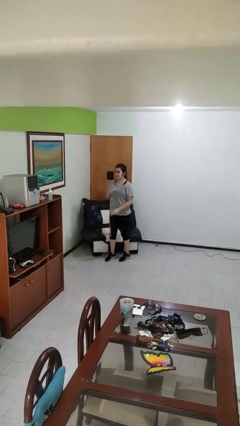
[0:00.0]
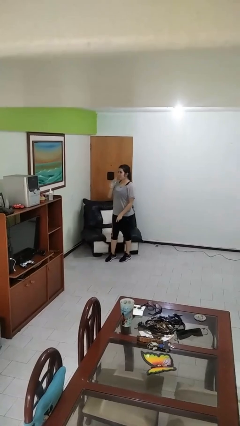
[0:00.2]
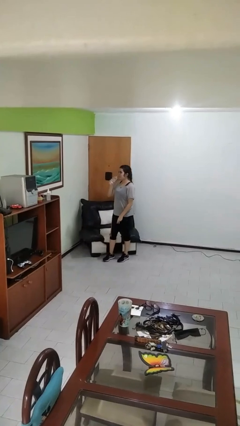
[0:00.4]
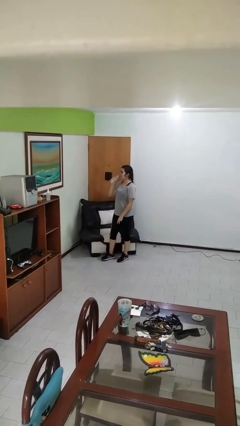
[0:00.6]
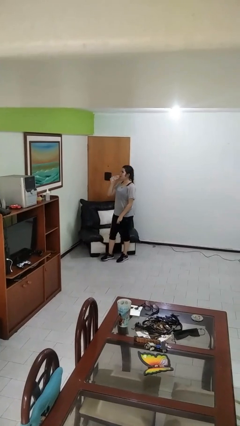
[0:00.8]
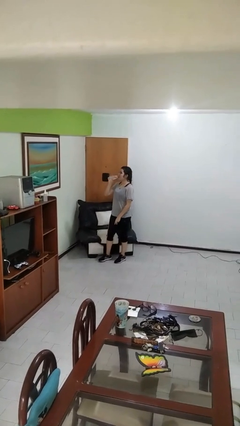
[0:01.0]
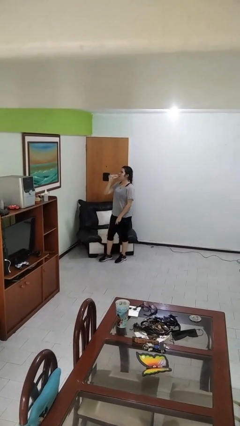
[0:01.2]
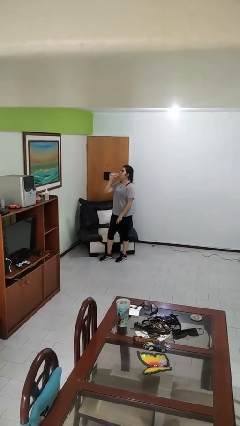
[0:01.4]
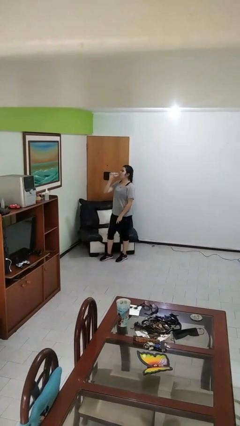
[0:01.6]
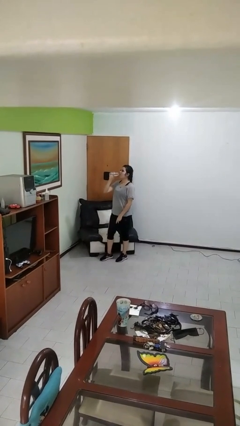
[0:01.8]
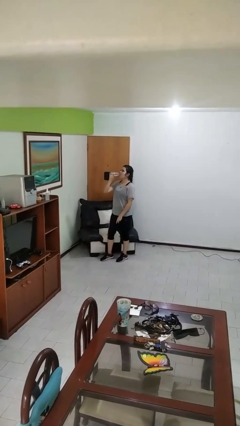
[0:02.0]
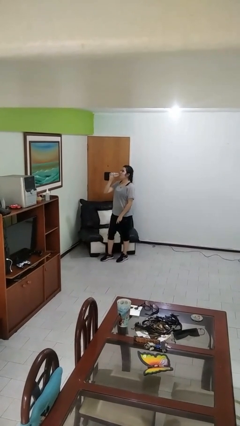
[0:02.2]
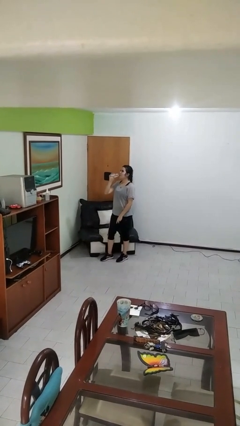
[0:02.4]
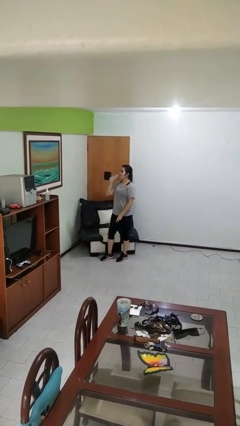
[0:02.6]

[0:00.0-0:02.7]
person drinks from bottle

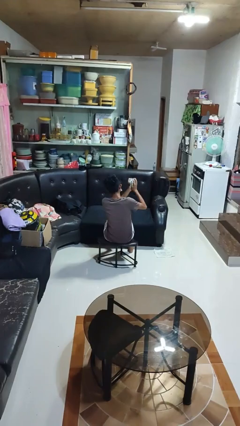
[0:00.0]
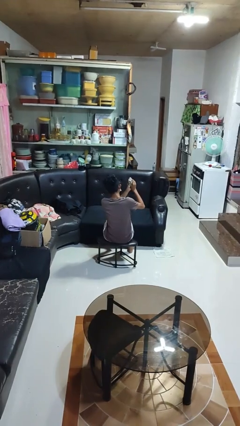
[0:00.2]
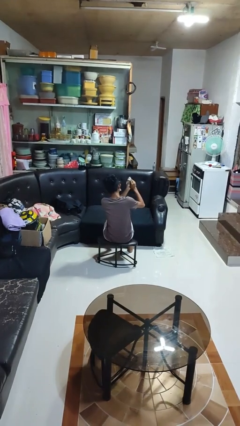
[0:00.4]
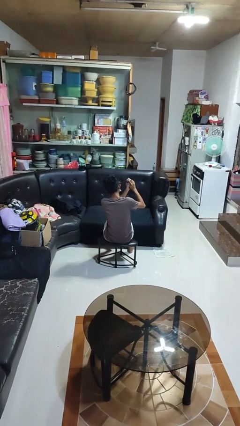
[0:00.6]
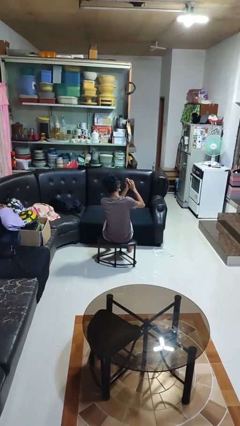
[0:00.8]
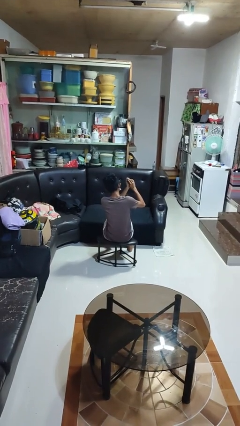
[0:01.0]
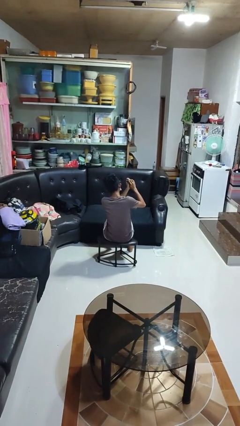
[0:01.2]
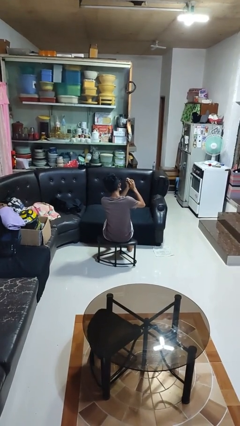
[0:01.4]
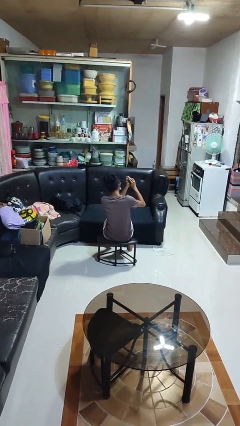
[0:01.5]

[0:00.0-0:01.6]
person crumples paper

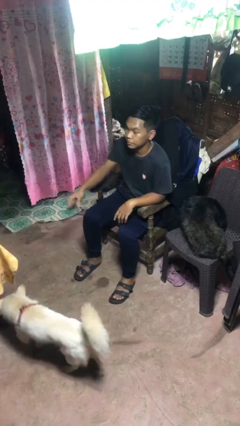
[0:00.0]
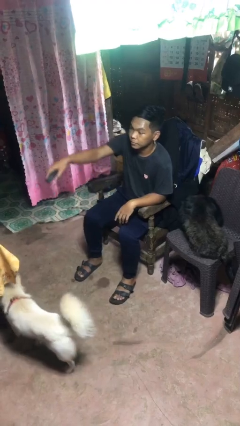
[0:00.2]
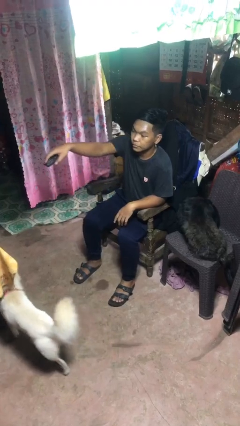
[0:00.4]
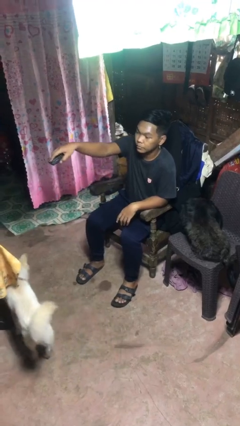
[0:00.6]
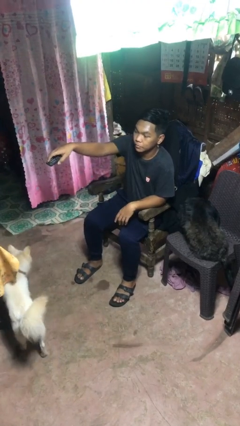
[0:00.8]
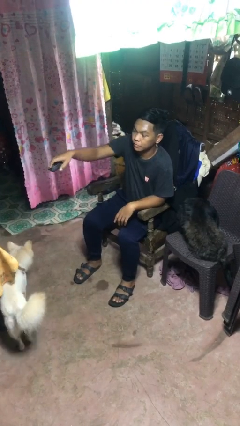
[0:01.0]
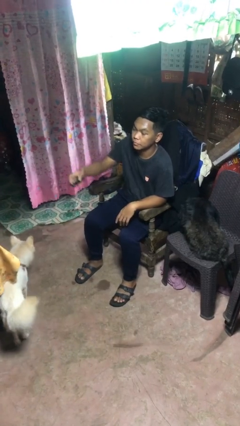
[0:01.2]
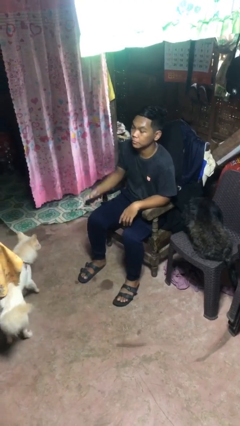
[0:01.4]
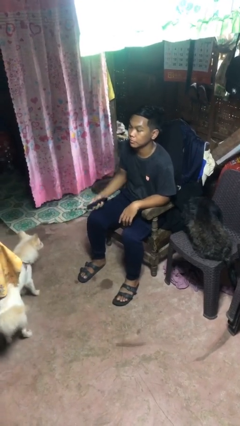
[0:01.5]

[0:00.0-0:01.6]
person uses television remote

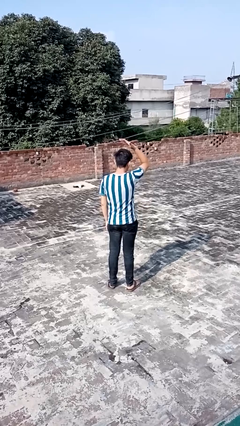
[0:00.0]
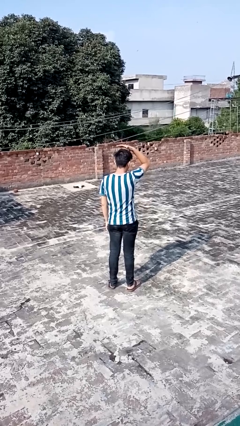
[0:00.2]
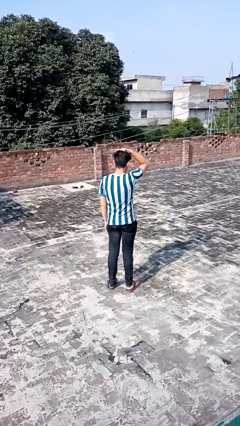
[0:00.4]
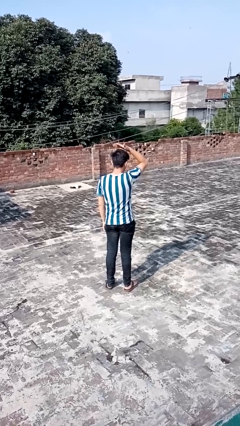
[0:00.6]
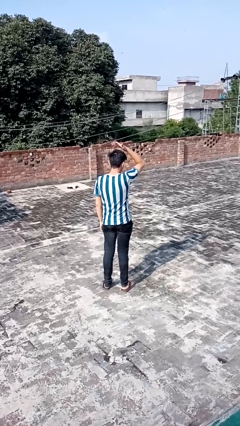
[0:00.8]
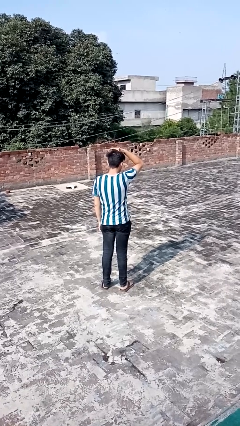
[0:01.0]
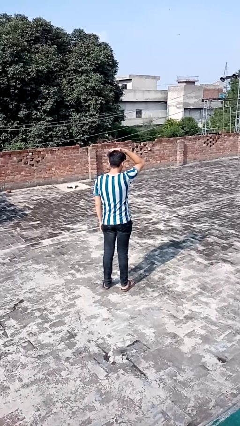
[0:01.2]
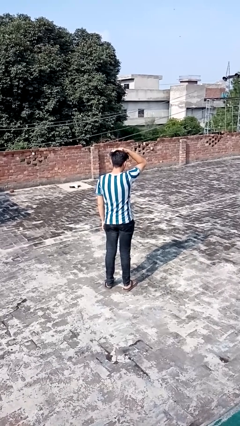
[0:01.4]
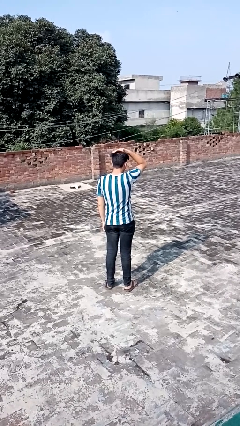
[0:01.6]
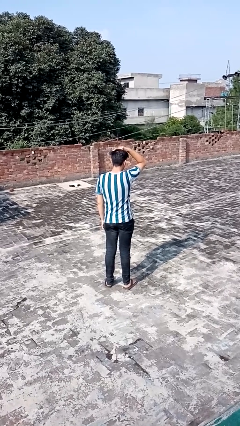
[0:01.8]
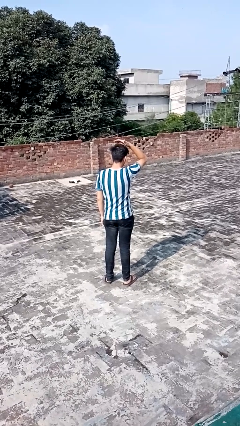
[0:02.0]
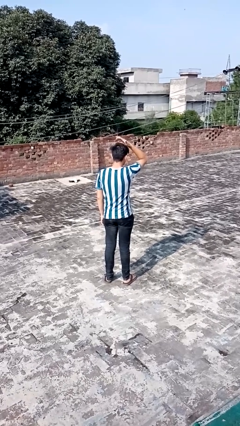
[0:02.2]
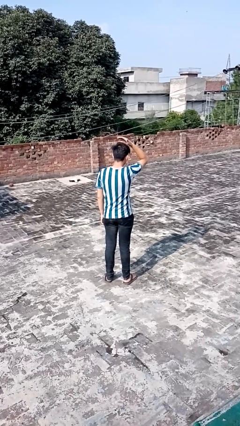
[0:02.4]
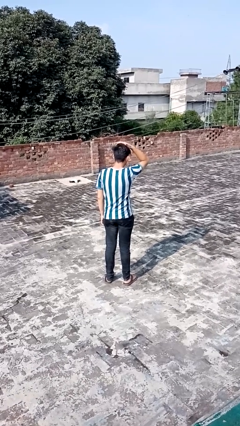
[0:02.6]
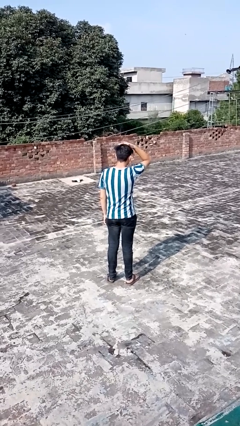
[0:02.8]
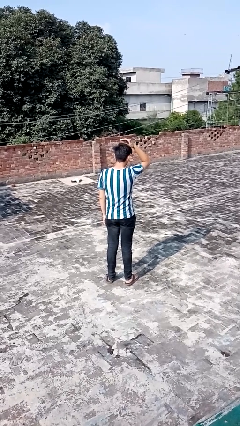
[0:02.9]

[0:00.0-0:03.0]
person pats head

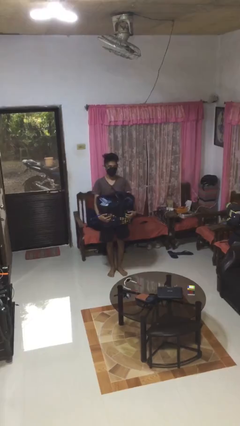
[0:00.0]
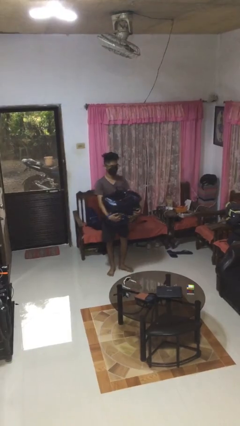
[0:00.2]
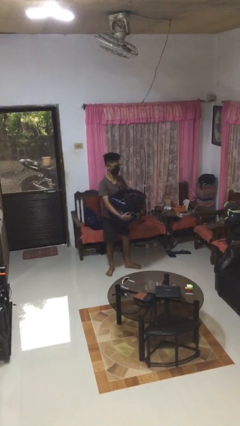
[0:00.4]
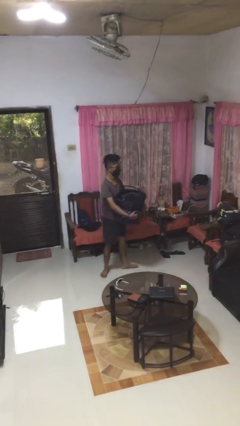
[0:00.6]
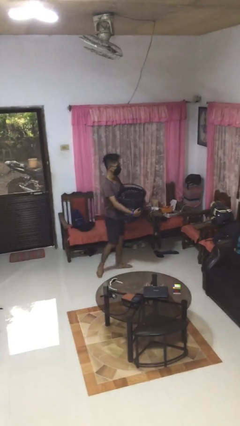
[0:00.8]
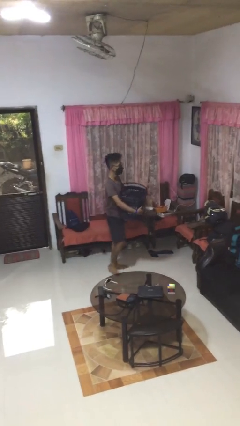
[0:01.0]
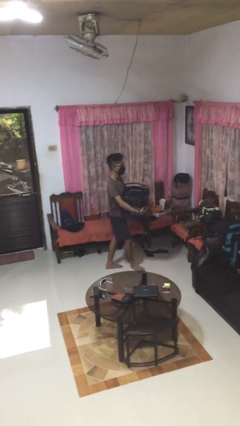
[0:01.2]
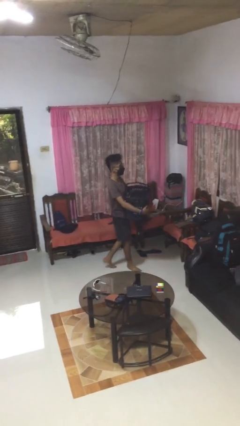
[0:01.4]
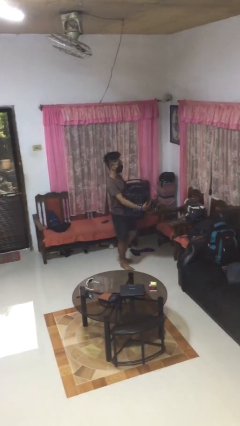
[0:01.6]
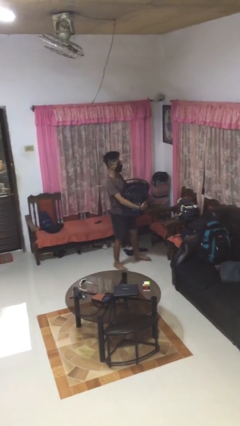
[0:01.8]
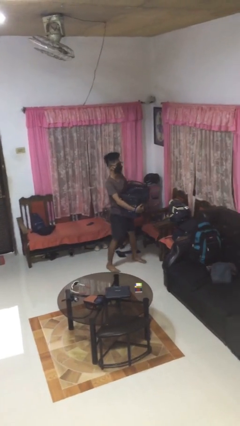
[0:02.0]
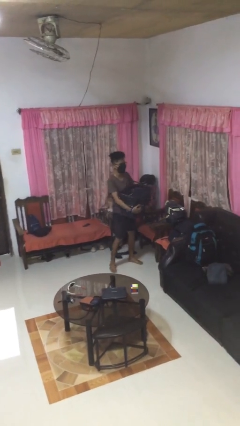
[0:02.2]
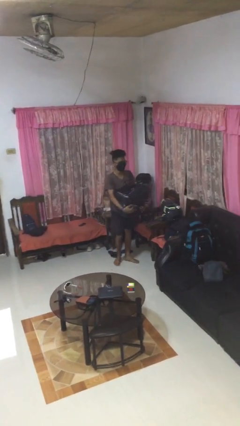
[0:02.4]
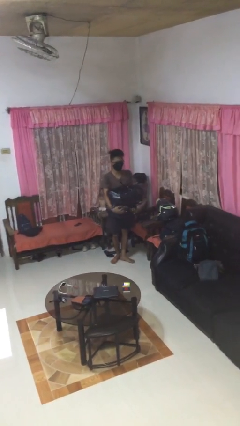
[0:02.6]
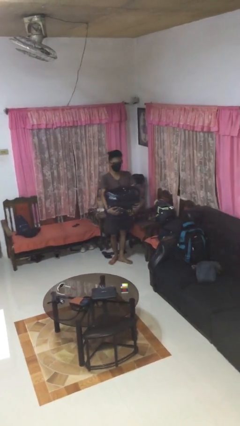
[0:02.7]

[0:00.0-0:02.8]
person carries laundry basket

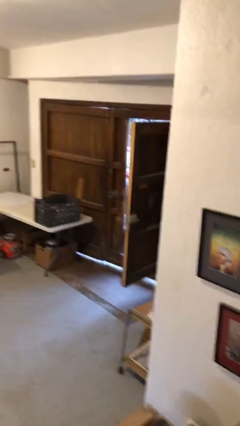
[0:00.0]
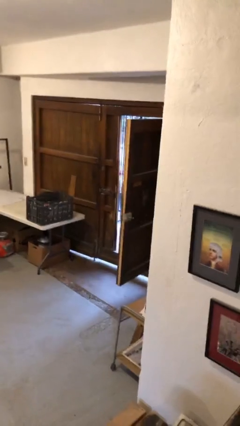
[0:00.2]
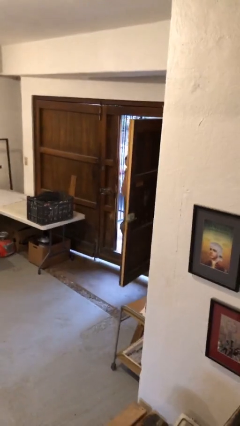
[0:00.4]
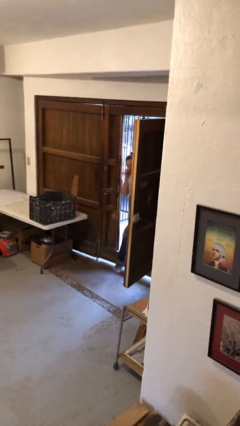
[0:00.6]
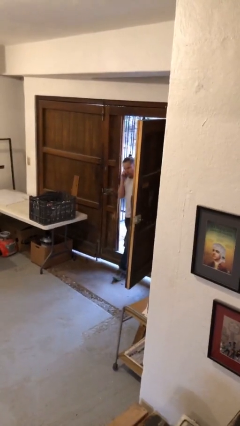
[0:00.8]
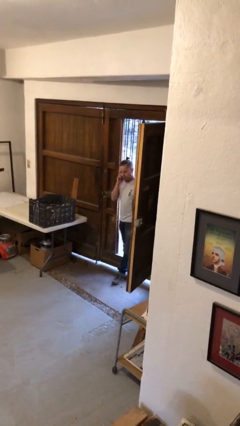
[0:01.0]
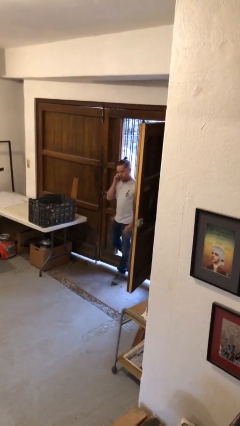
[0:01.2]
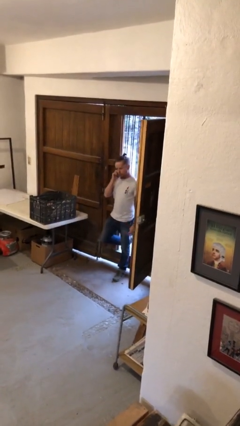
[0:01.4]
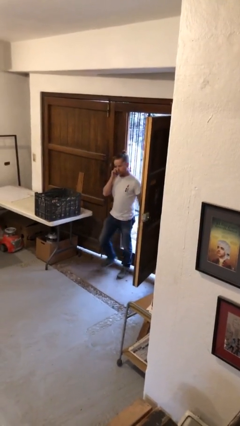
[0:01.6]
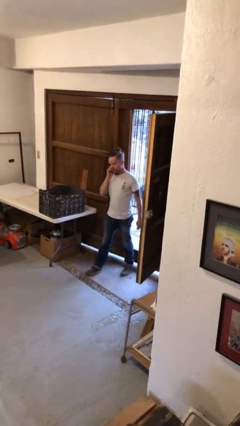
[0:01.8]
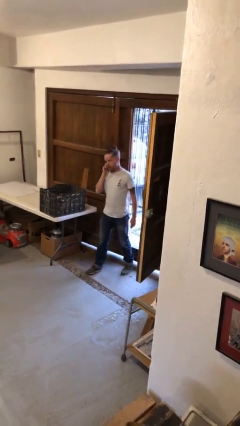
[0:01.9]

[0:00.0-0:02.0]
person enters scene through structure

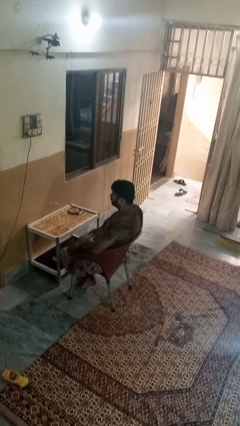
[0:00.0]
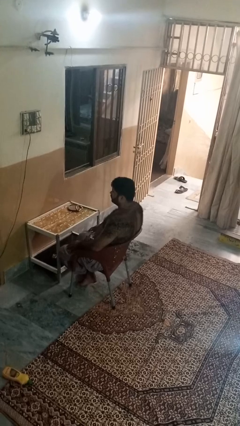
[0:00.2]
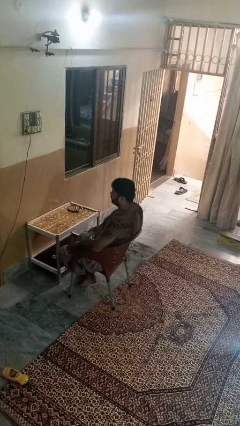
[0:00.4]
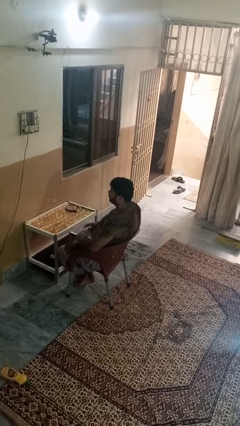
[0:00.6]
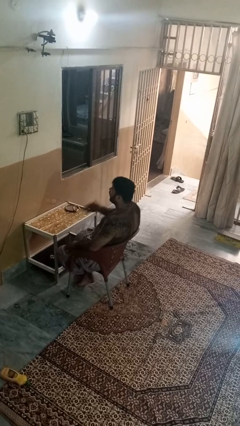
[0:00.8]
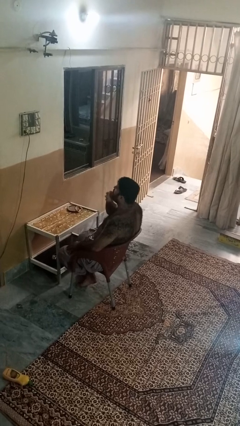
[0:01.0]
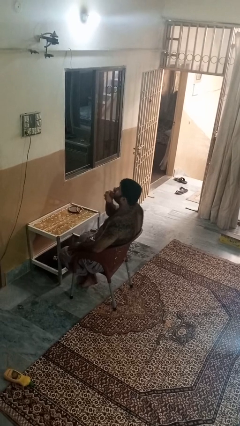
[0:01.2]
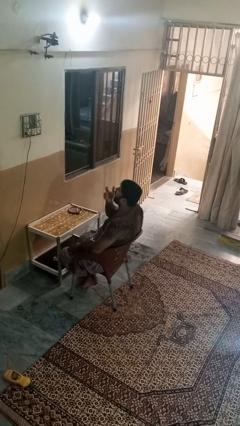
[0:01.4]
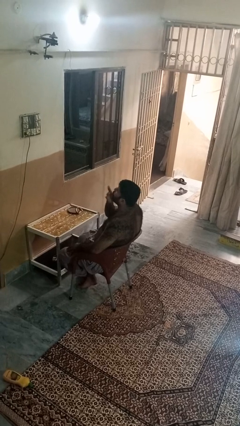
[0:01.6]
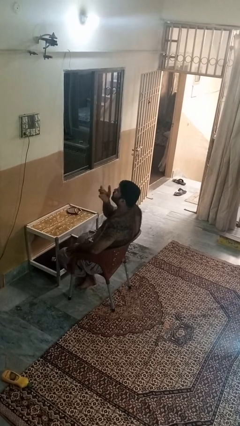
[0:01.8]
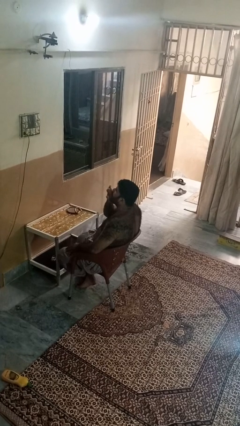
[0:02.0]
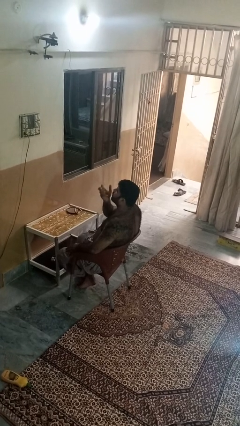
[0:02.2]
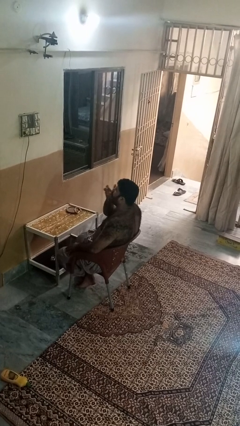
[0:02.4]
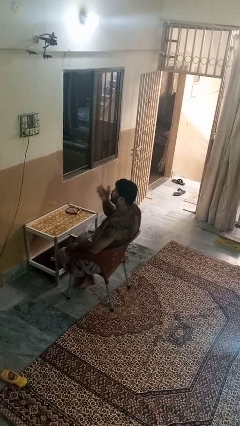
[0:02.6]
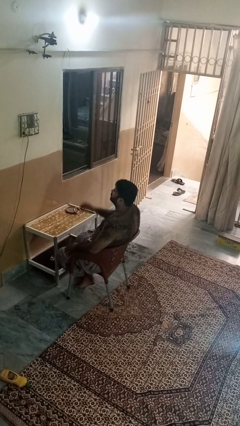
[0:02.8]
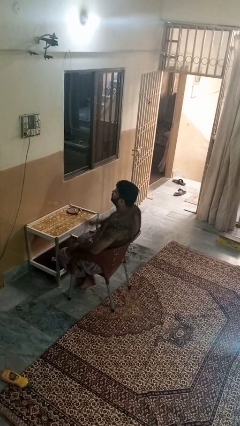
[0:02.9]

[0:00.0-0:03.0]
person licks fingers

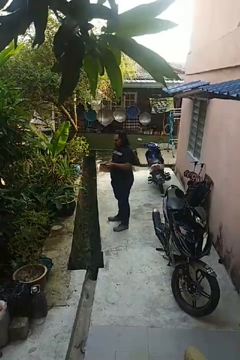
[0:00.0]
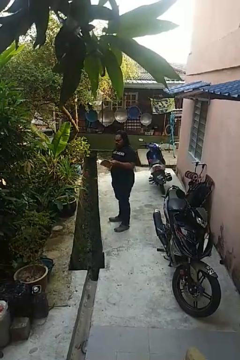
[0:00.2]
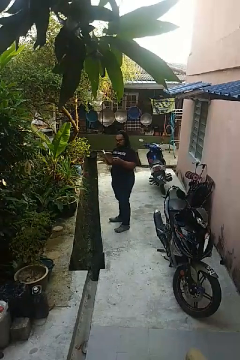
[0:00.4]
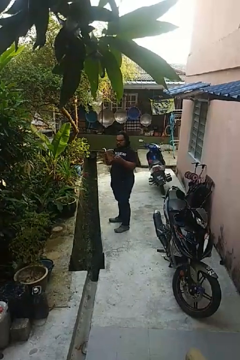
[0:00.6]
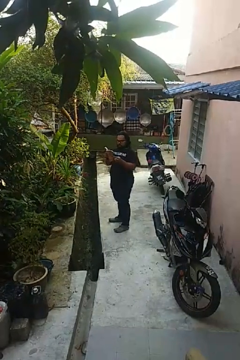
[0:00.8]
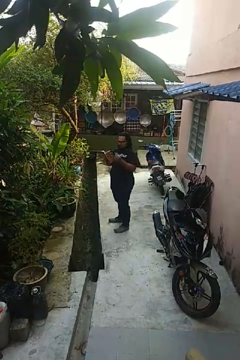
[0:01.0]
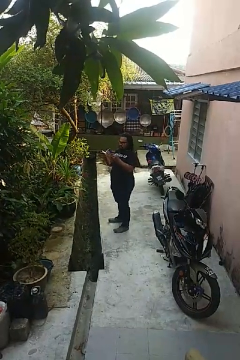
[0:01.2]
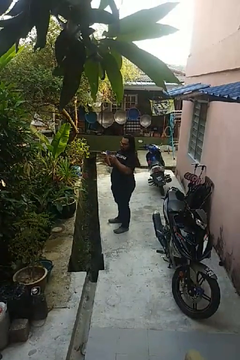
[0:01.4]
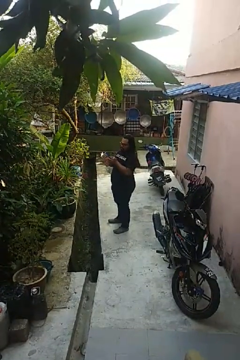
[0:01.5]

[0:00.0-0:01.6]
person reads book
